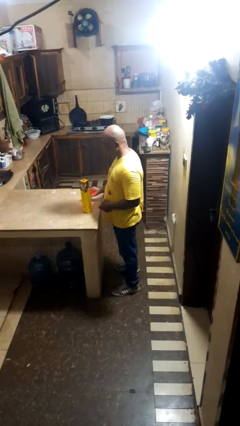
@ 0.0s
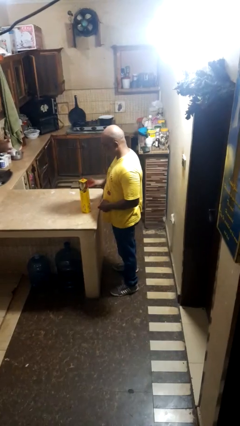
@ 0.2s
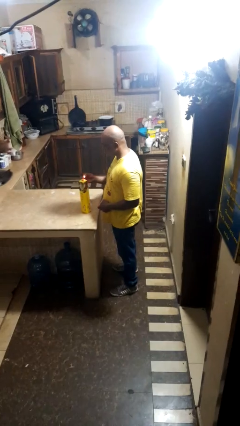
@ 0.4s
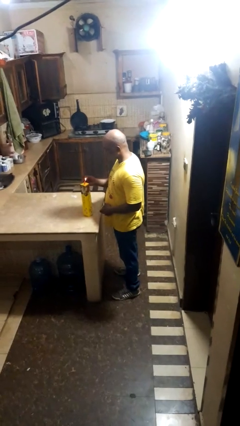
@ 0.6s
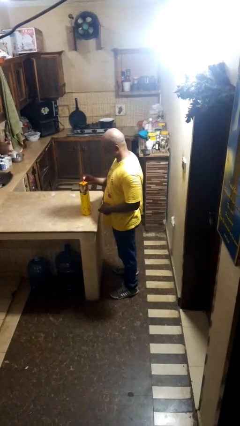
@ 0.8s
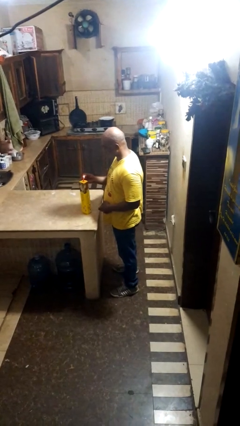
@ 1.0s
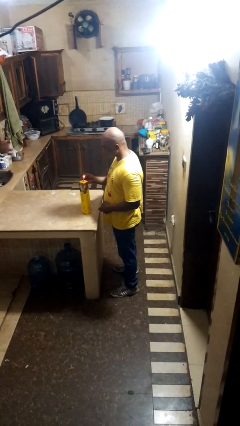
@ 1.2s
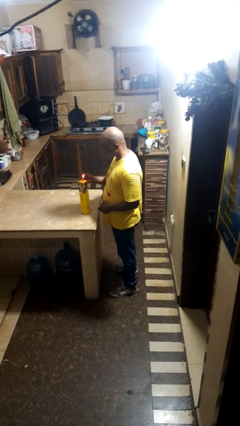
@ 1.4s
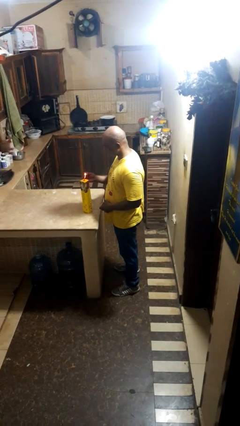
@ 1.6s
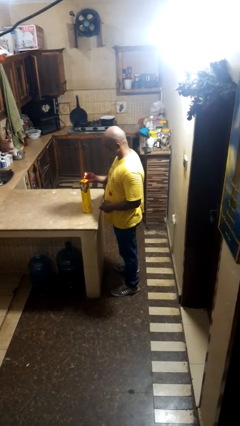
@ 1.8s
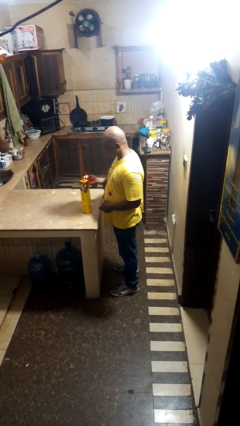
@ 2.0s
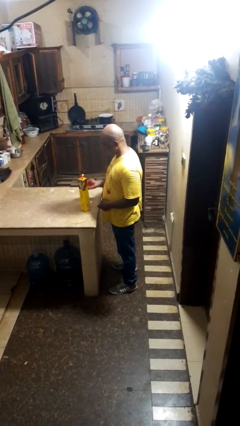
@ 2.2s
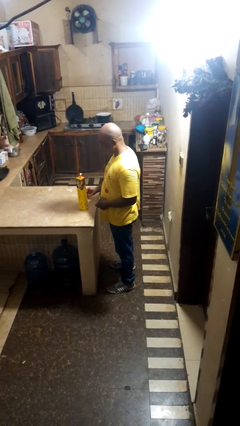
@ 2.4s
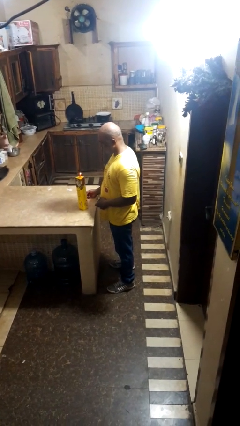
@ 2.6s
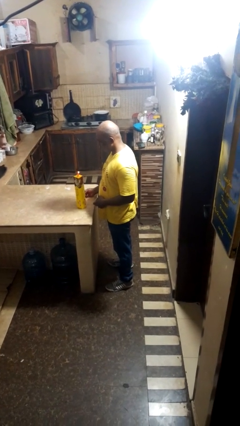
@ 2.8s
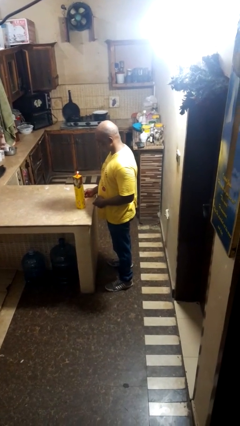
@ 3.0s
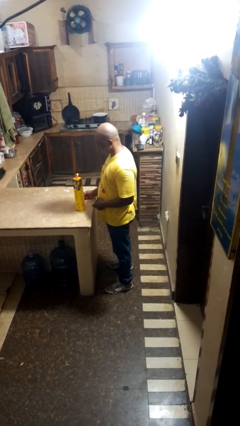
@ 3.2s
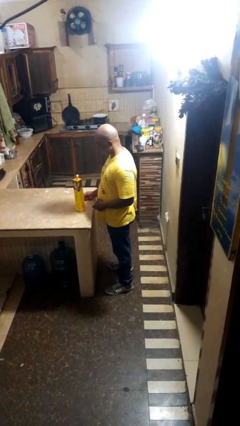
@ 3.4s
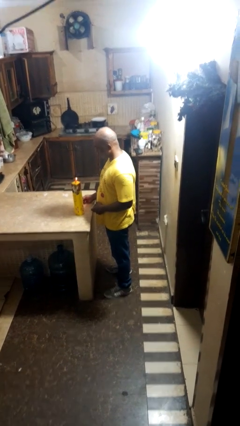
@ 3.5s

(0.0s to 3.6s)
person lights candle

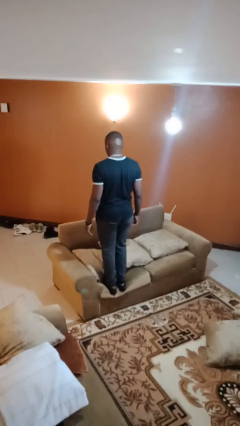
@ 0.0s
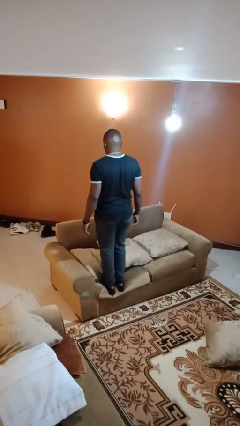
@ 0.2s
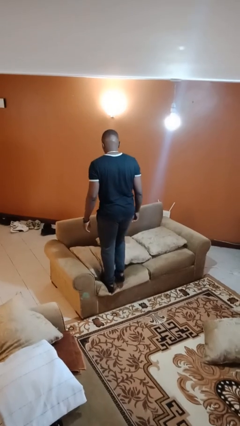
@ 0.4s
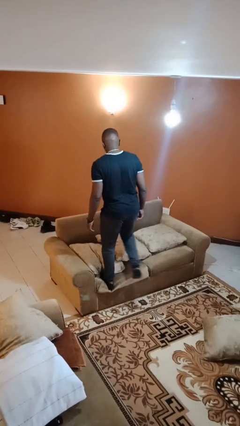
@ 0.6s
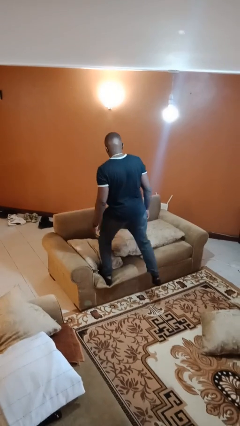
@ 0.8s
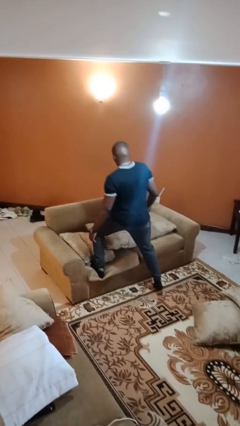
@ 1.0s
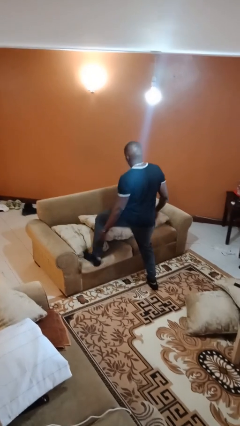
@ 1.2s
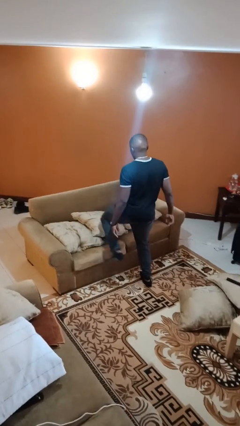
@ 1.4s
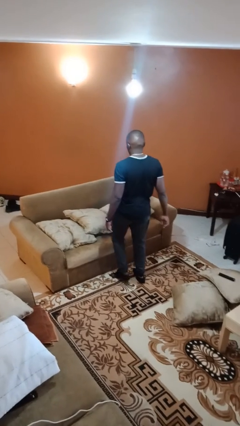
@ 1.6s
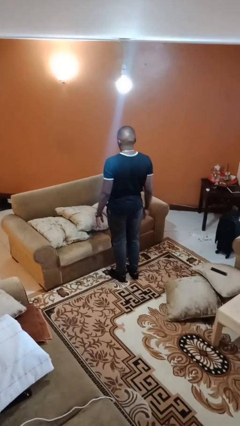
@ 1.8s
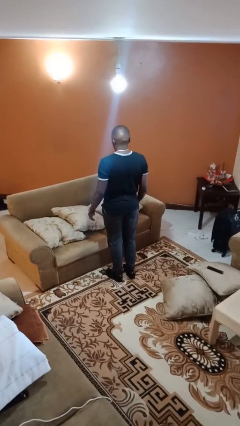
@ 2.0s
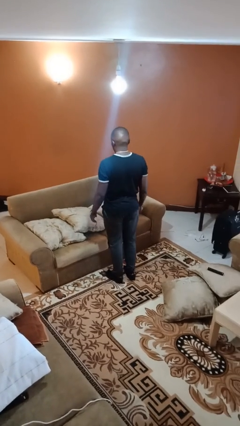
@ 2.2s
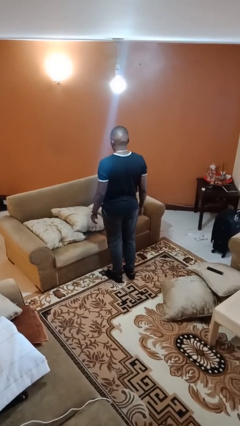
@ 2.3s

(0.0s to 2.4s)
person climbs off couch

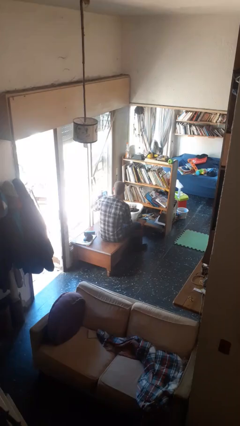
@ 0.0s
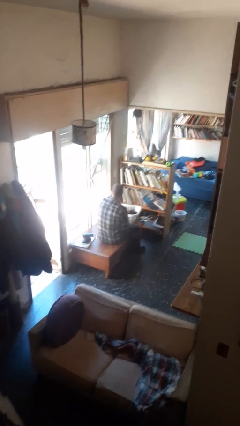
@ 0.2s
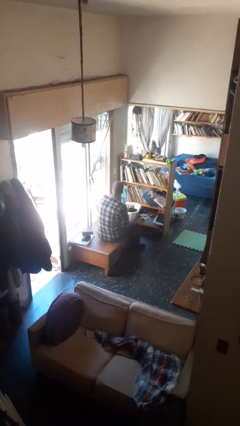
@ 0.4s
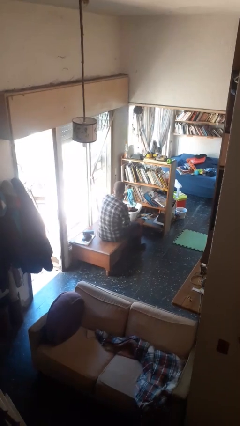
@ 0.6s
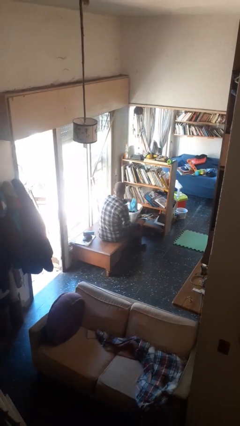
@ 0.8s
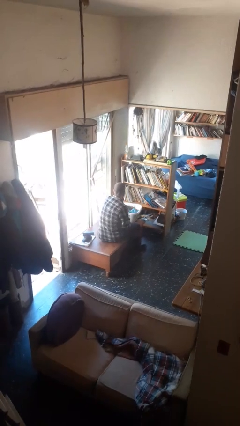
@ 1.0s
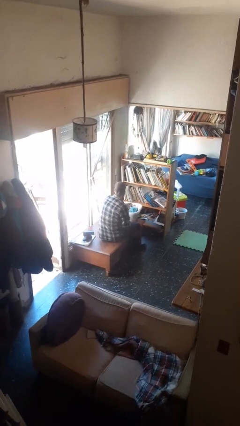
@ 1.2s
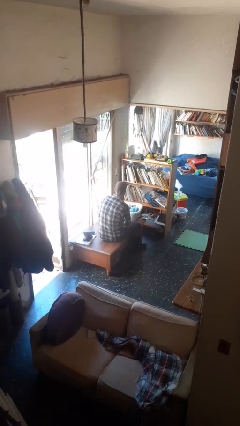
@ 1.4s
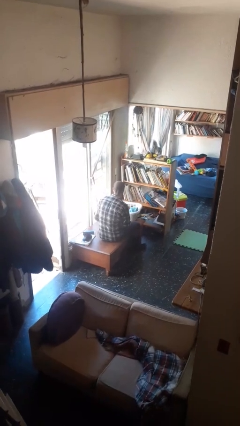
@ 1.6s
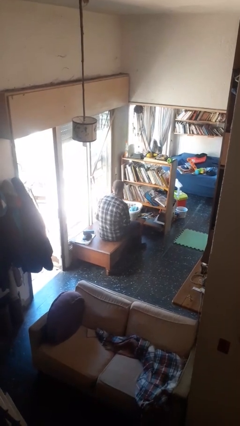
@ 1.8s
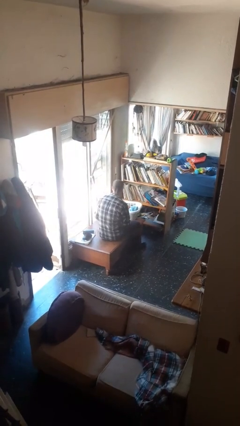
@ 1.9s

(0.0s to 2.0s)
person puts object into basket

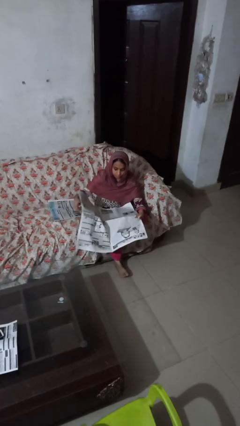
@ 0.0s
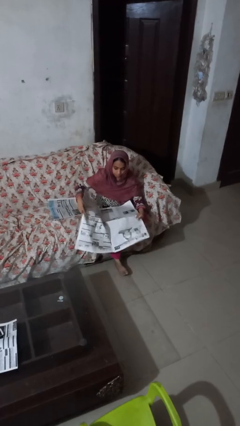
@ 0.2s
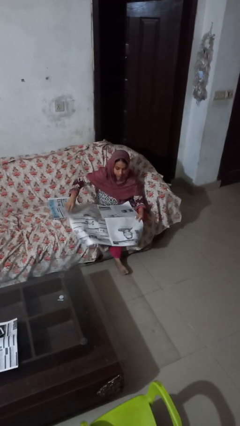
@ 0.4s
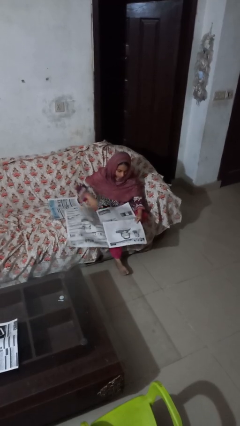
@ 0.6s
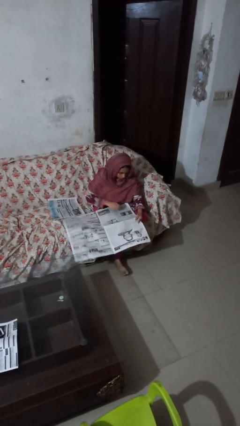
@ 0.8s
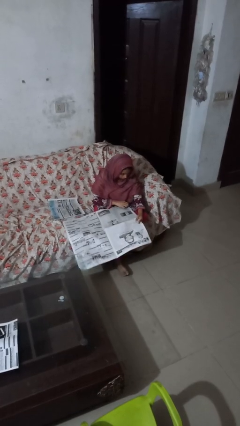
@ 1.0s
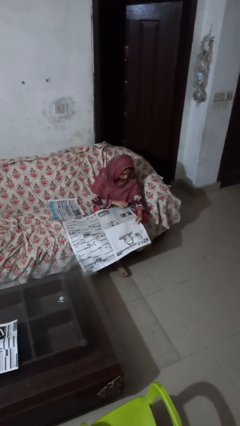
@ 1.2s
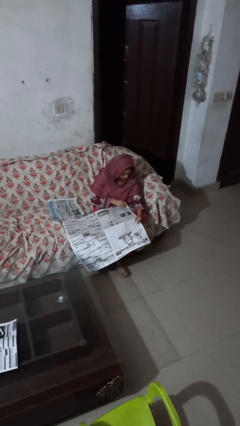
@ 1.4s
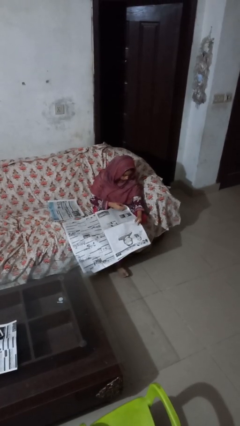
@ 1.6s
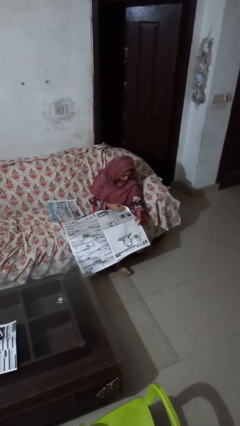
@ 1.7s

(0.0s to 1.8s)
person reads newspaper

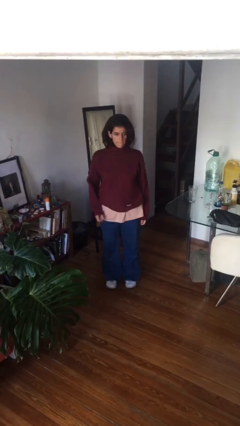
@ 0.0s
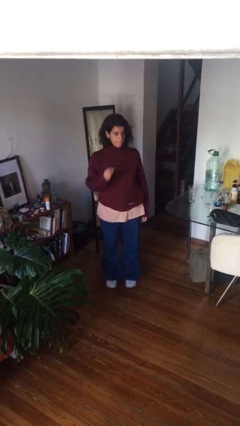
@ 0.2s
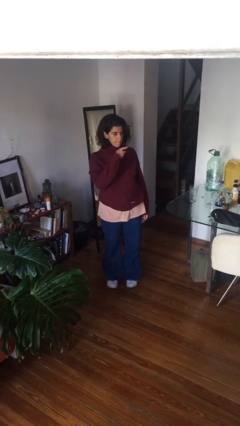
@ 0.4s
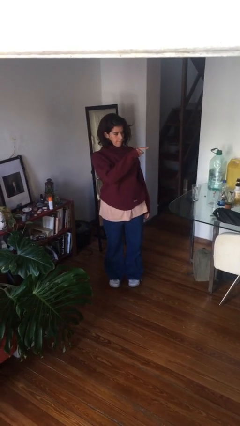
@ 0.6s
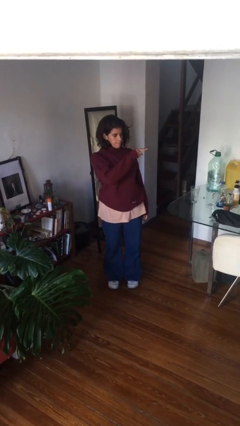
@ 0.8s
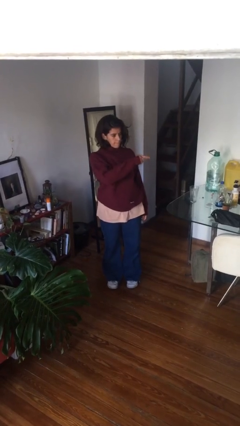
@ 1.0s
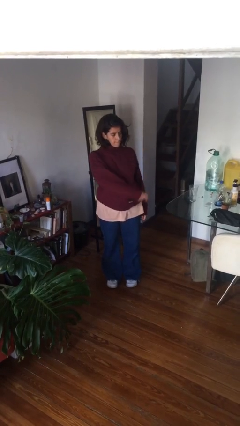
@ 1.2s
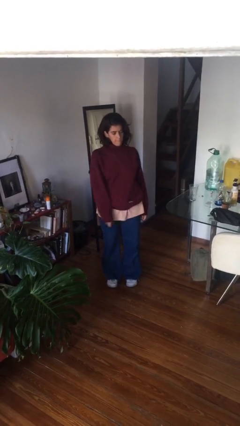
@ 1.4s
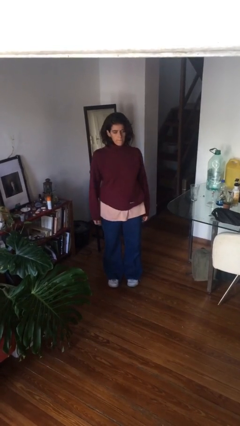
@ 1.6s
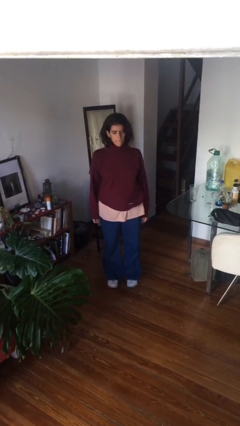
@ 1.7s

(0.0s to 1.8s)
person gestures swipe left

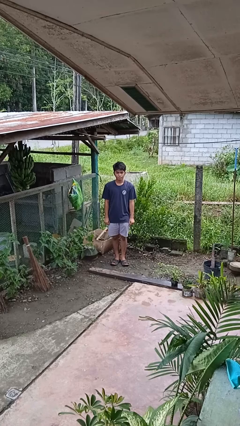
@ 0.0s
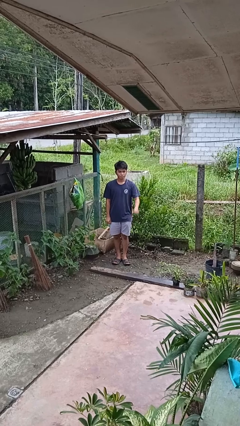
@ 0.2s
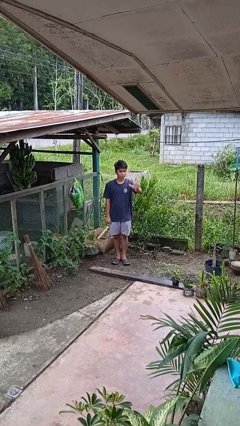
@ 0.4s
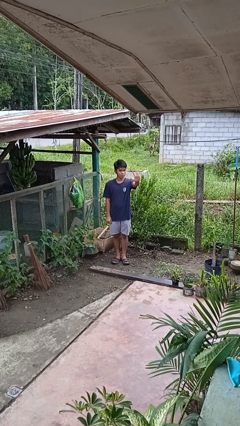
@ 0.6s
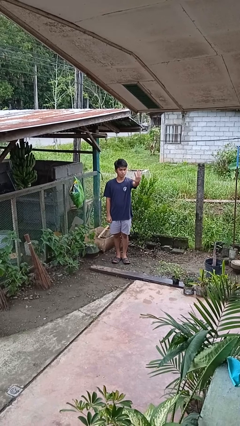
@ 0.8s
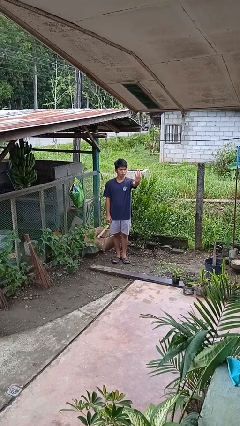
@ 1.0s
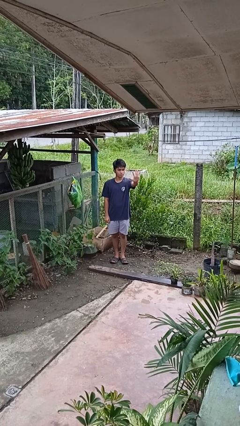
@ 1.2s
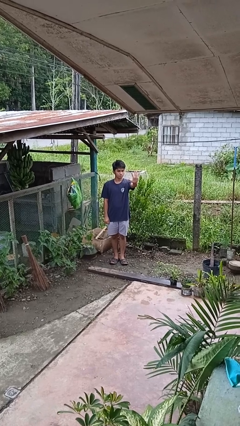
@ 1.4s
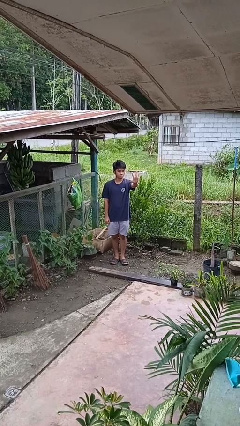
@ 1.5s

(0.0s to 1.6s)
person gestures number five

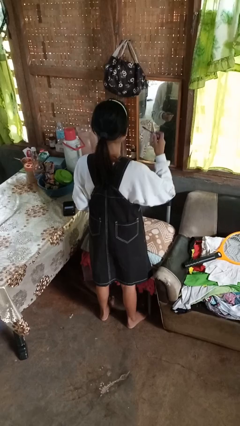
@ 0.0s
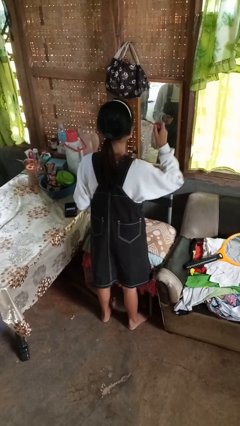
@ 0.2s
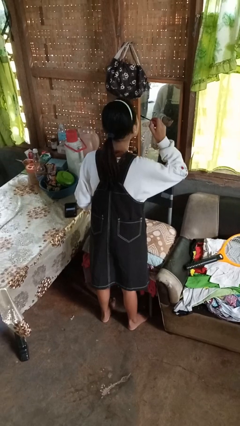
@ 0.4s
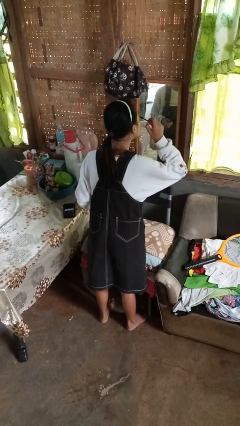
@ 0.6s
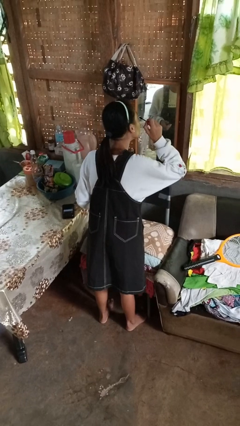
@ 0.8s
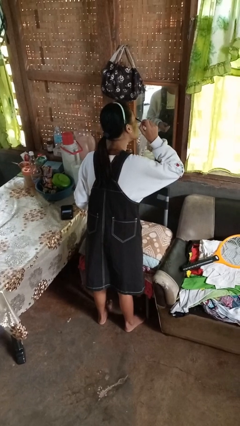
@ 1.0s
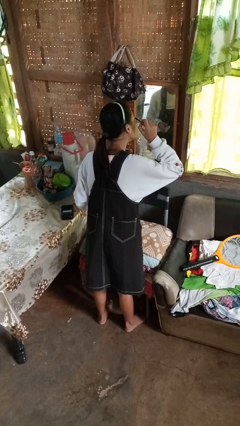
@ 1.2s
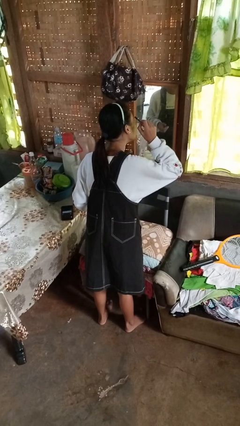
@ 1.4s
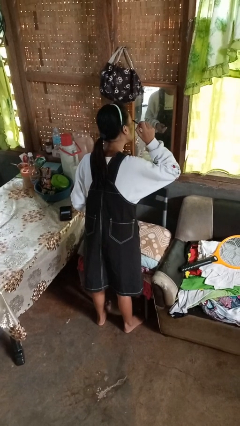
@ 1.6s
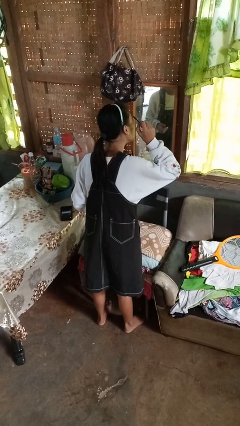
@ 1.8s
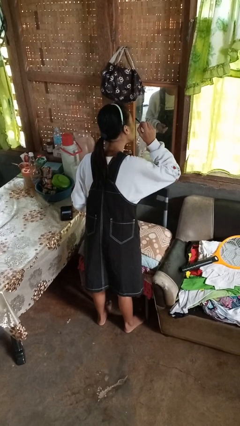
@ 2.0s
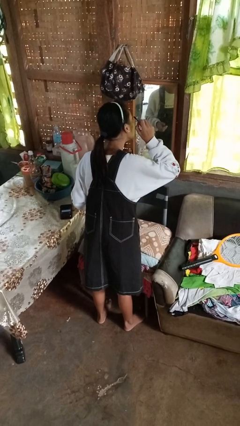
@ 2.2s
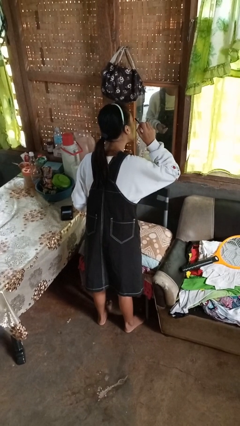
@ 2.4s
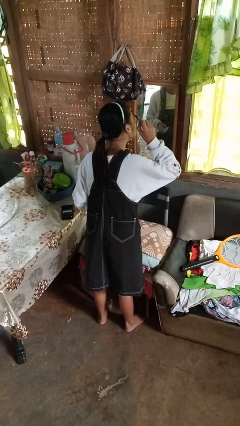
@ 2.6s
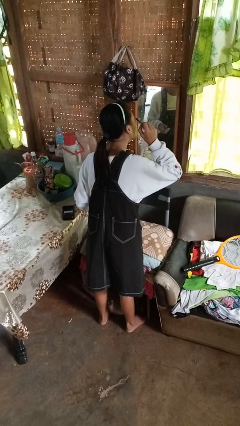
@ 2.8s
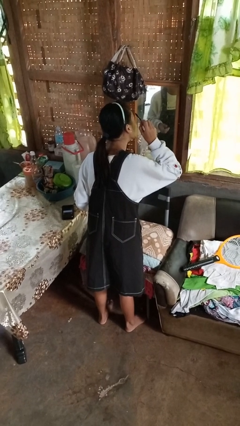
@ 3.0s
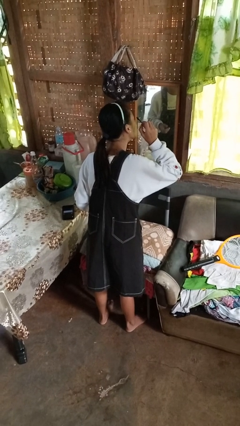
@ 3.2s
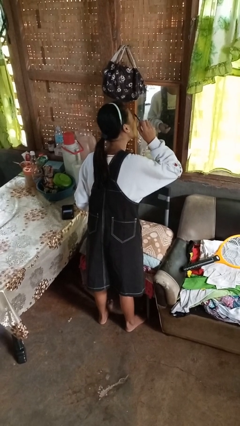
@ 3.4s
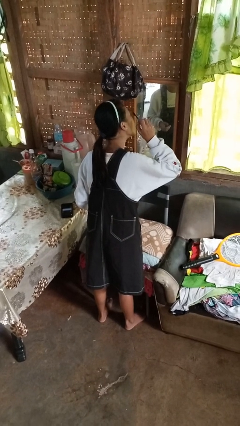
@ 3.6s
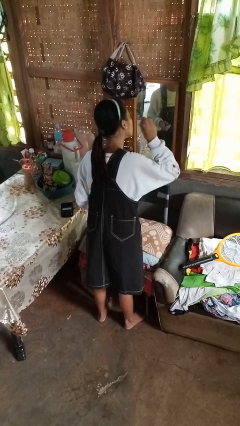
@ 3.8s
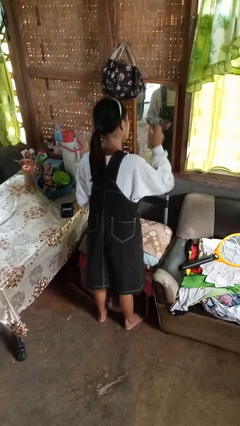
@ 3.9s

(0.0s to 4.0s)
person applies eye makeup
